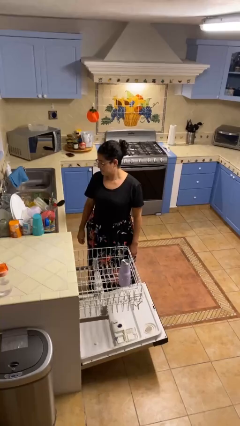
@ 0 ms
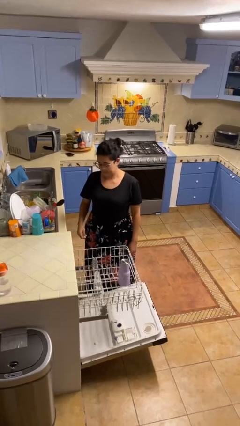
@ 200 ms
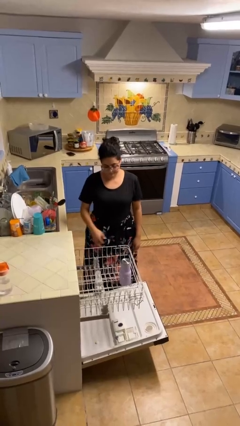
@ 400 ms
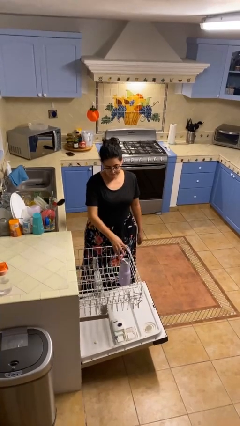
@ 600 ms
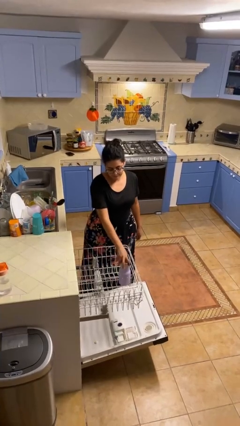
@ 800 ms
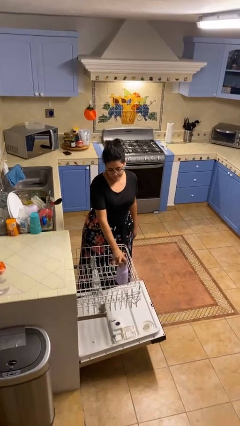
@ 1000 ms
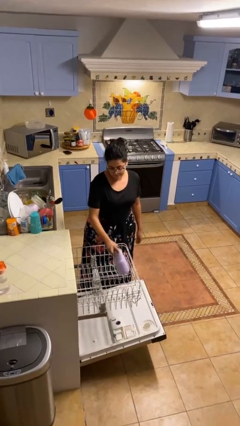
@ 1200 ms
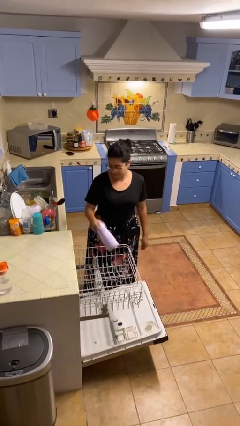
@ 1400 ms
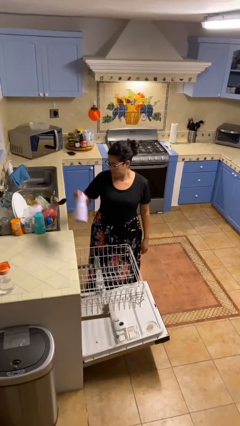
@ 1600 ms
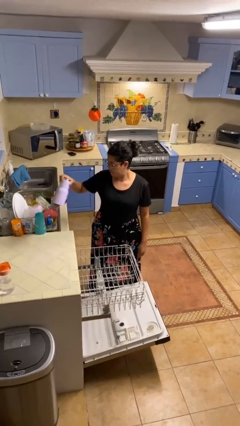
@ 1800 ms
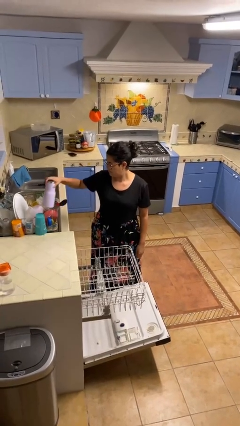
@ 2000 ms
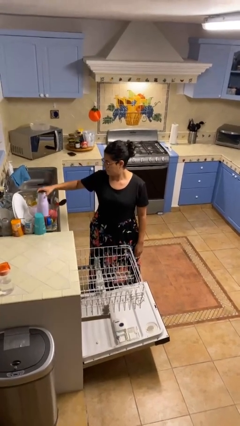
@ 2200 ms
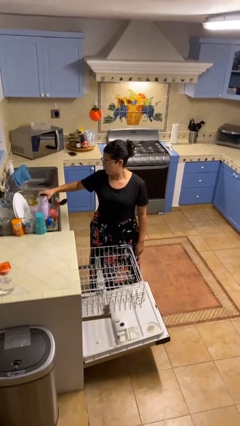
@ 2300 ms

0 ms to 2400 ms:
person unloads dishwasher

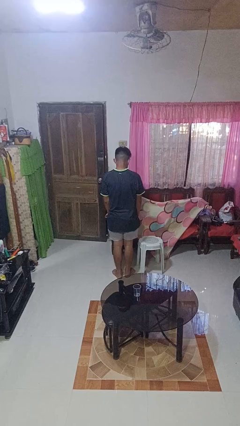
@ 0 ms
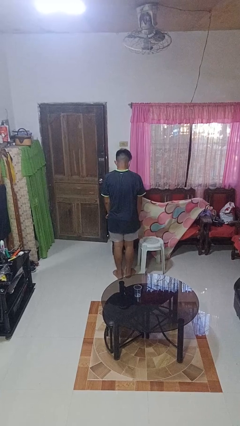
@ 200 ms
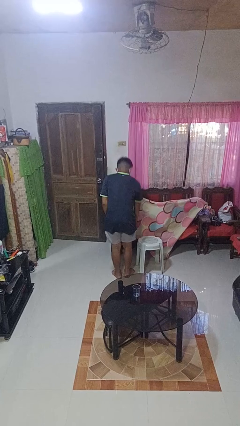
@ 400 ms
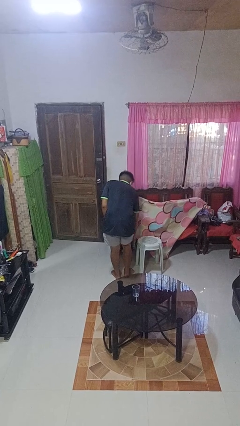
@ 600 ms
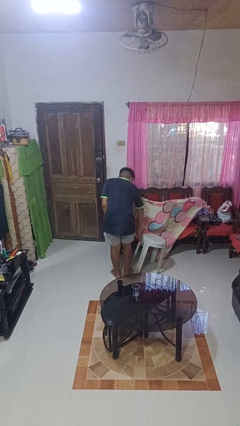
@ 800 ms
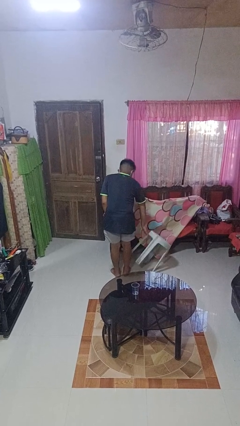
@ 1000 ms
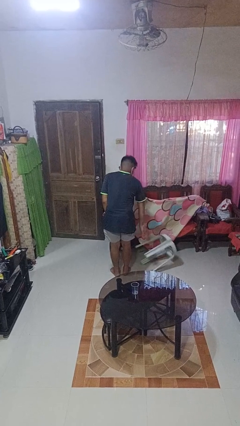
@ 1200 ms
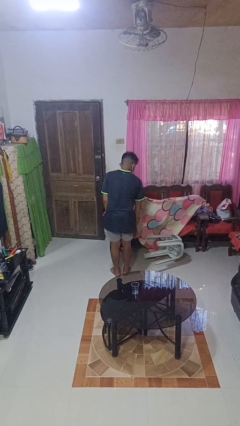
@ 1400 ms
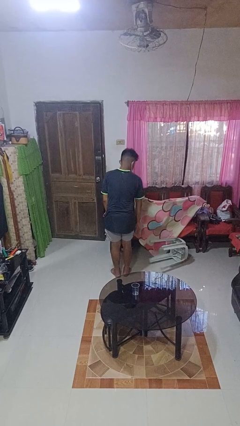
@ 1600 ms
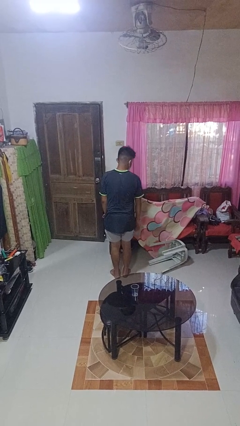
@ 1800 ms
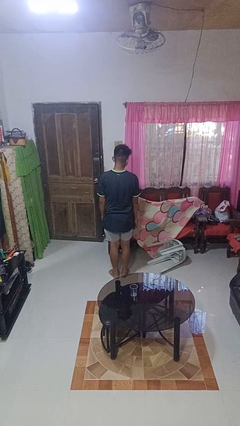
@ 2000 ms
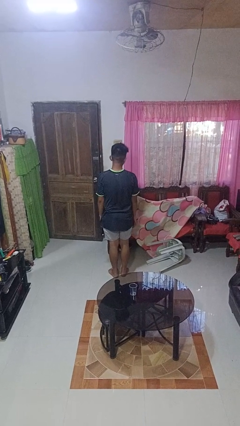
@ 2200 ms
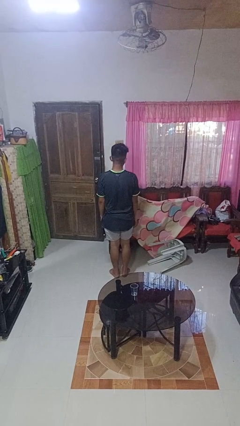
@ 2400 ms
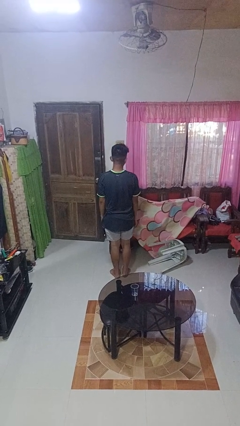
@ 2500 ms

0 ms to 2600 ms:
person knocks over furniture

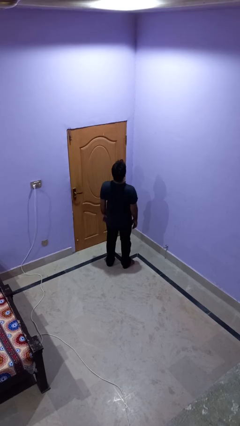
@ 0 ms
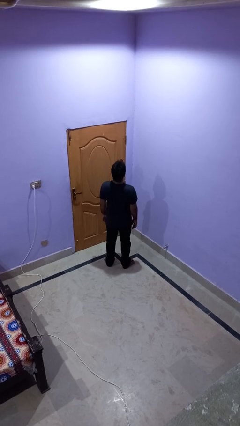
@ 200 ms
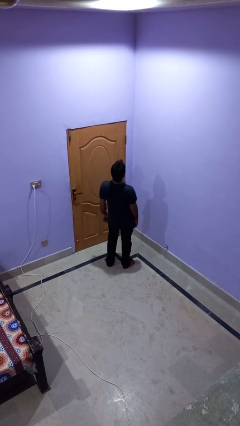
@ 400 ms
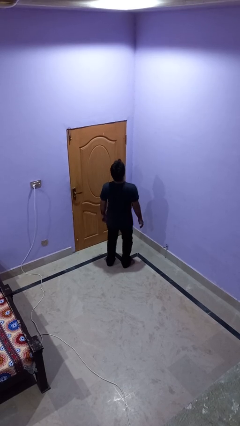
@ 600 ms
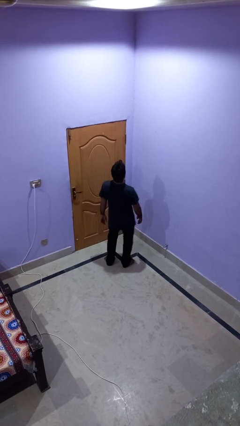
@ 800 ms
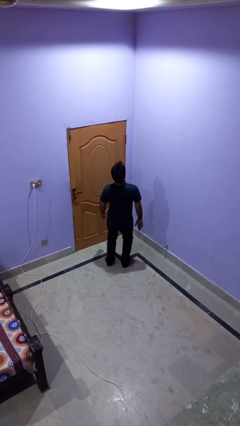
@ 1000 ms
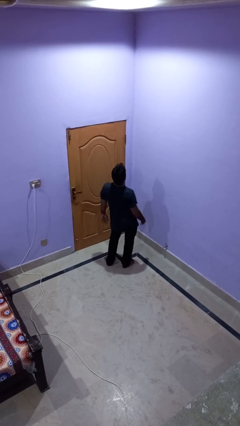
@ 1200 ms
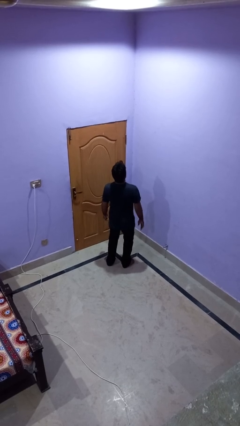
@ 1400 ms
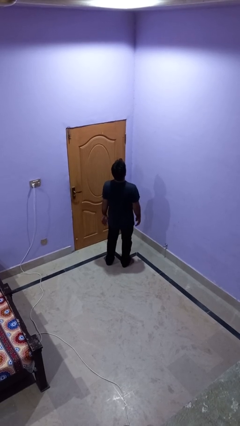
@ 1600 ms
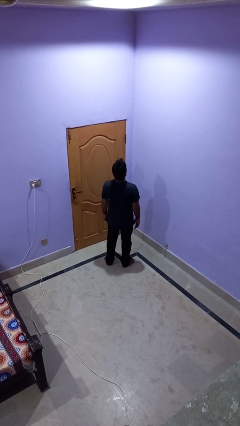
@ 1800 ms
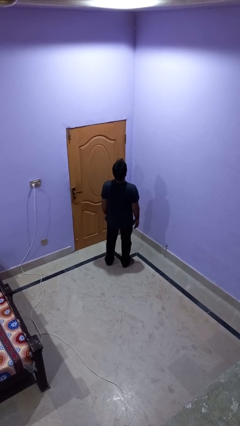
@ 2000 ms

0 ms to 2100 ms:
person wiggles hips

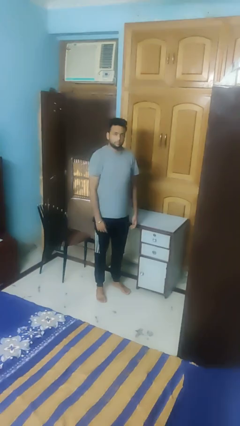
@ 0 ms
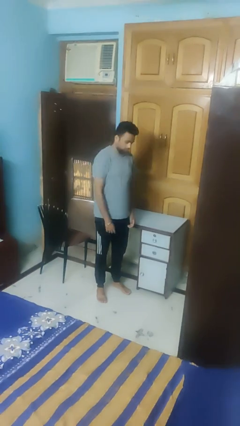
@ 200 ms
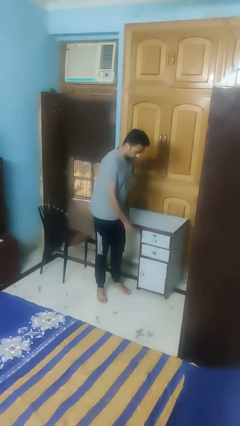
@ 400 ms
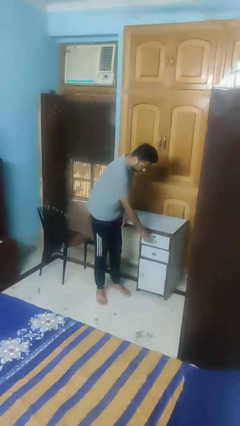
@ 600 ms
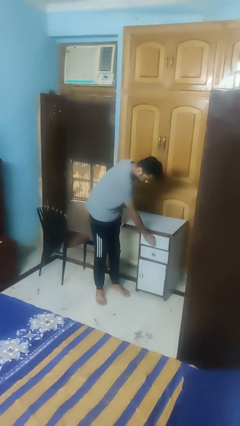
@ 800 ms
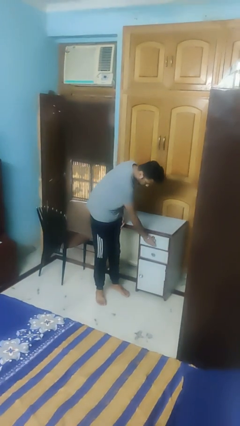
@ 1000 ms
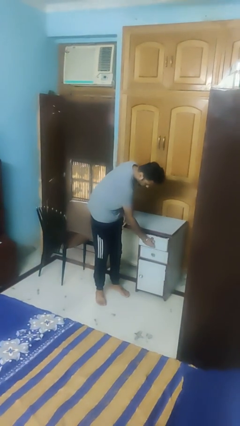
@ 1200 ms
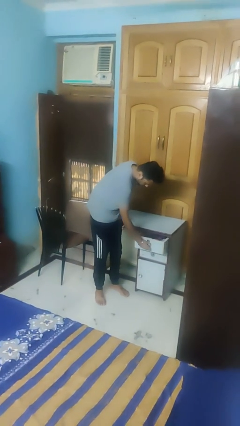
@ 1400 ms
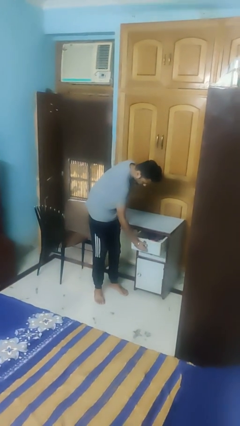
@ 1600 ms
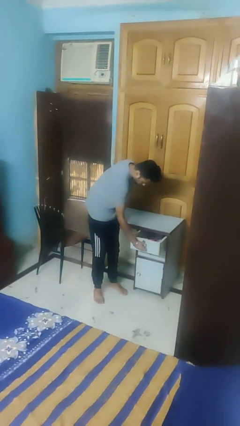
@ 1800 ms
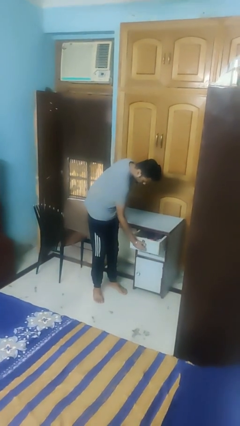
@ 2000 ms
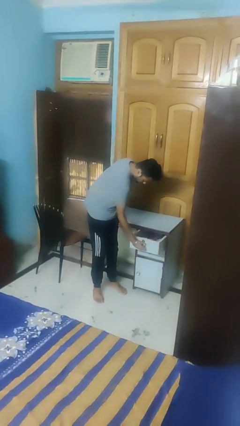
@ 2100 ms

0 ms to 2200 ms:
person opens dresser drawer

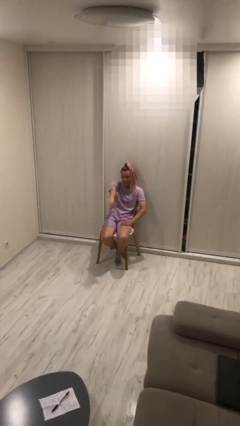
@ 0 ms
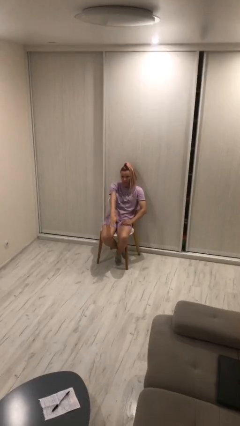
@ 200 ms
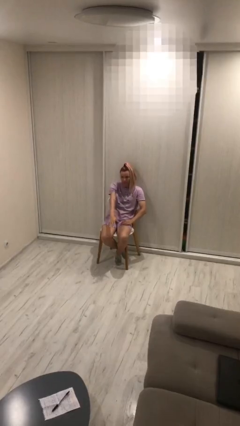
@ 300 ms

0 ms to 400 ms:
person gestures swipe down

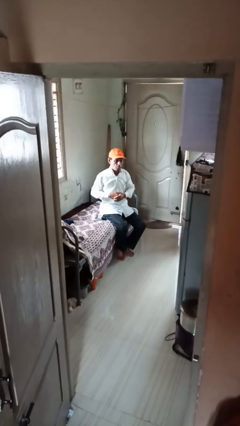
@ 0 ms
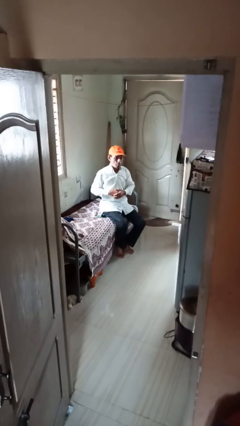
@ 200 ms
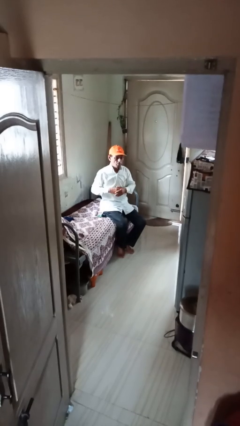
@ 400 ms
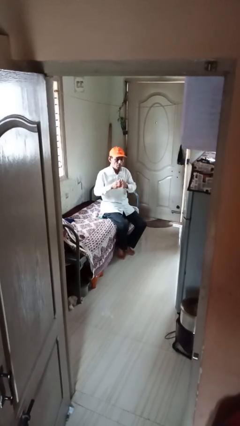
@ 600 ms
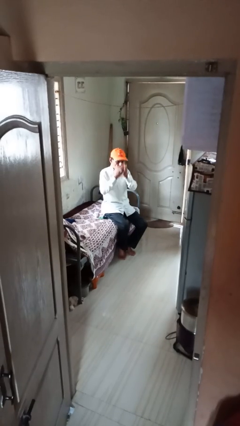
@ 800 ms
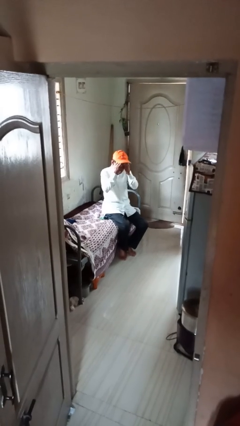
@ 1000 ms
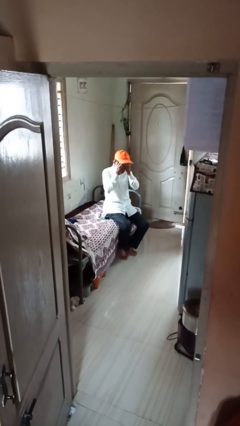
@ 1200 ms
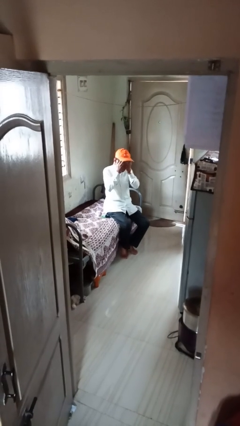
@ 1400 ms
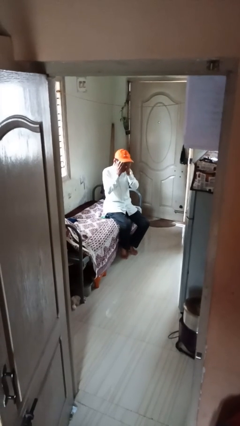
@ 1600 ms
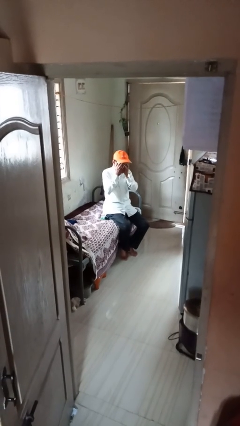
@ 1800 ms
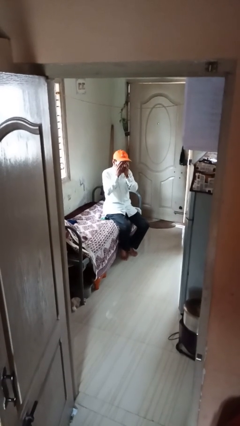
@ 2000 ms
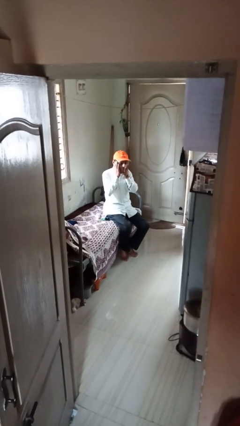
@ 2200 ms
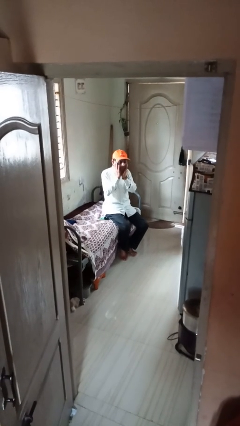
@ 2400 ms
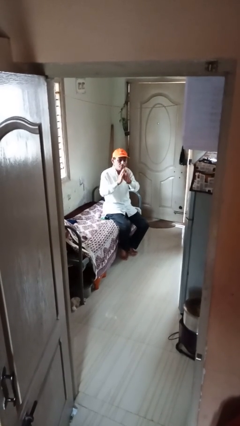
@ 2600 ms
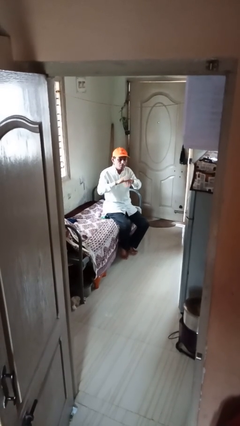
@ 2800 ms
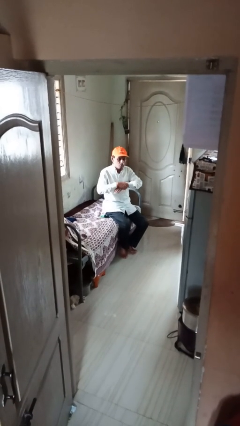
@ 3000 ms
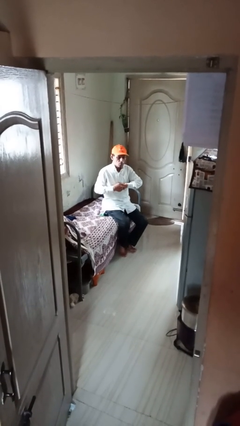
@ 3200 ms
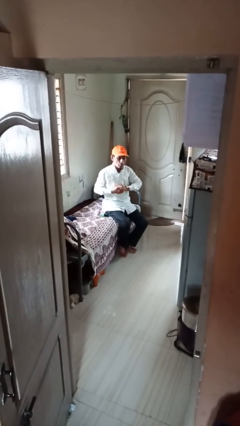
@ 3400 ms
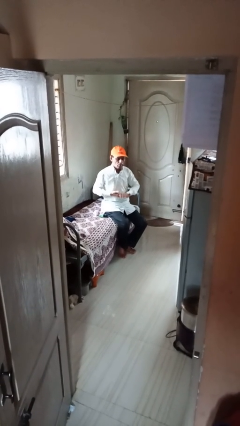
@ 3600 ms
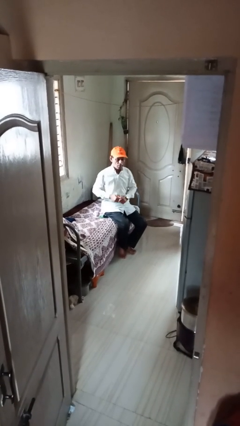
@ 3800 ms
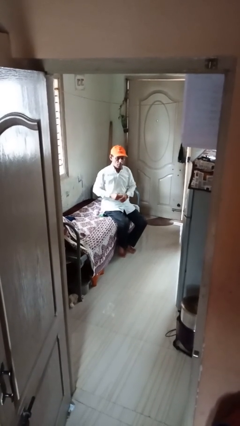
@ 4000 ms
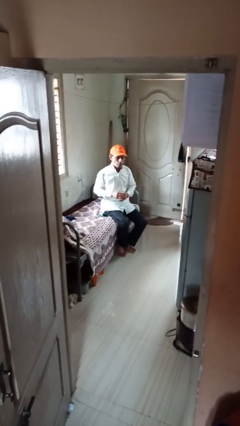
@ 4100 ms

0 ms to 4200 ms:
person applies sunscreen

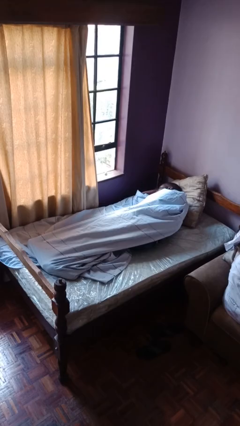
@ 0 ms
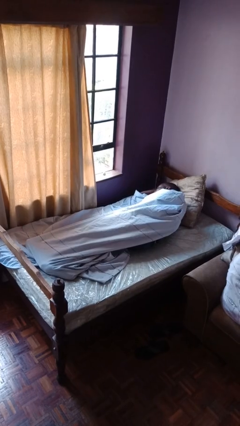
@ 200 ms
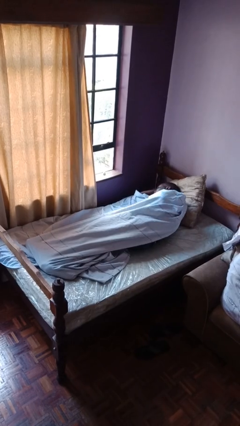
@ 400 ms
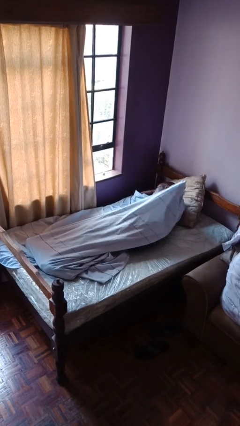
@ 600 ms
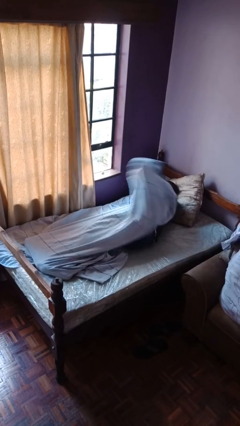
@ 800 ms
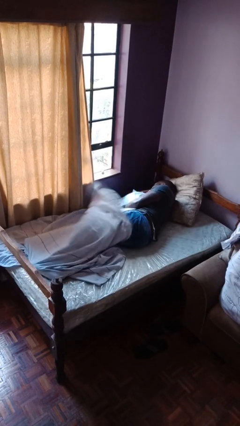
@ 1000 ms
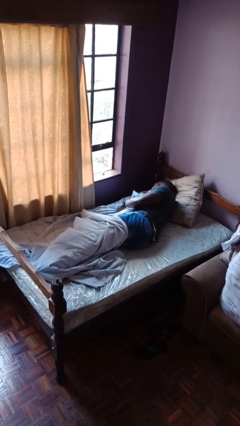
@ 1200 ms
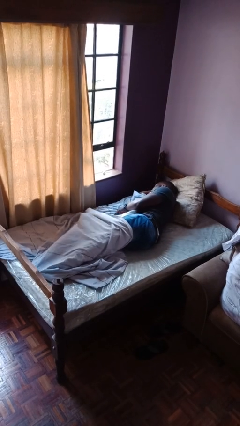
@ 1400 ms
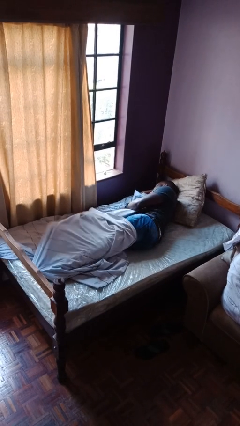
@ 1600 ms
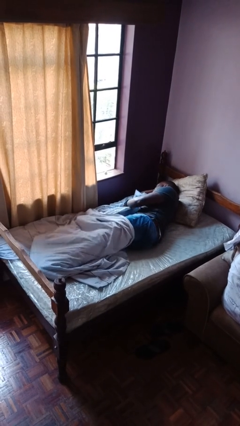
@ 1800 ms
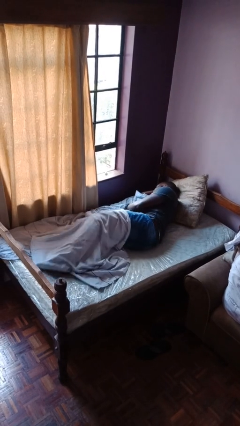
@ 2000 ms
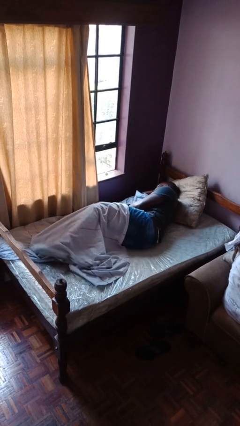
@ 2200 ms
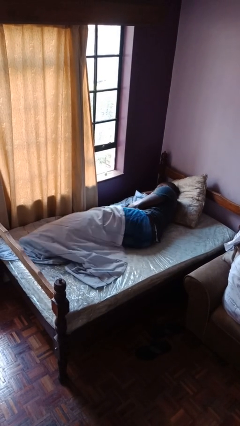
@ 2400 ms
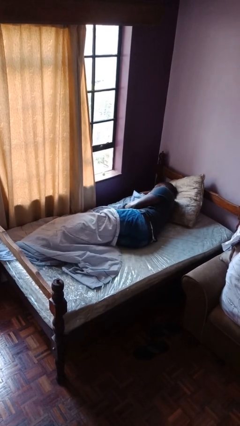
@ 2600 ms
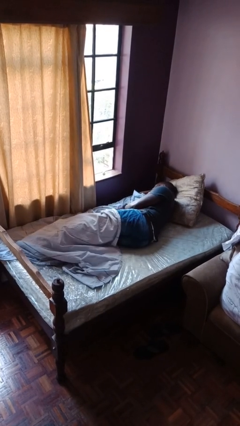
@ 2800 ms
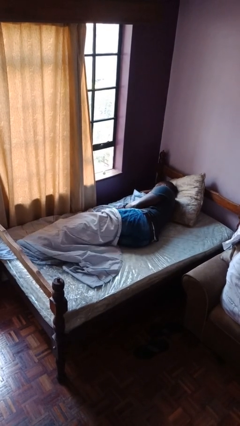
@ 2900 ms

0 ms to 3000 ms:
person uncovers with bedsheets

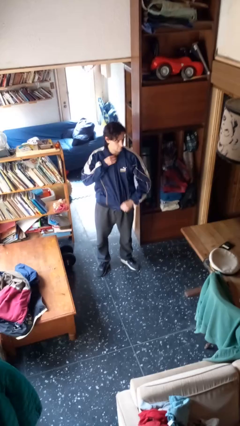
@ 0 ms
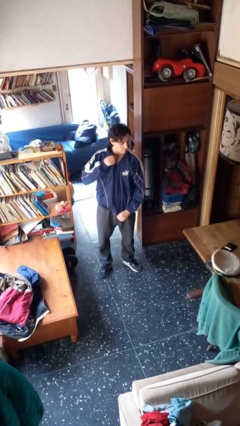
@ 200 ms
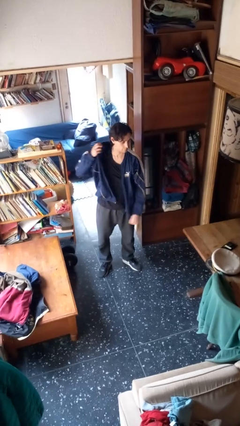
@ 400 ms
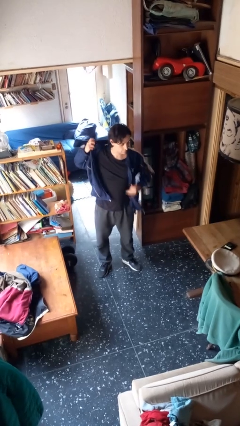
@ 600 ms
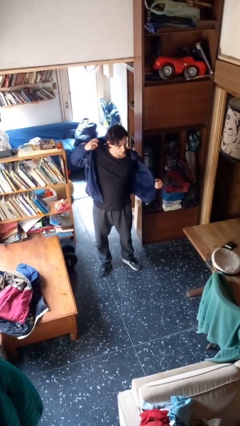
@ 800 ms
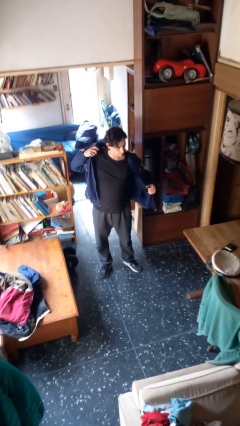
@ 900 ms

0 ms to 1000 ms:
person unzips jacket
